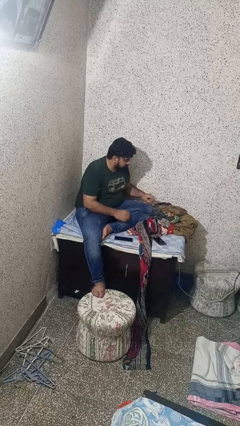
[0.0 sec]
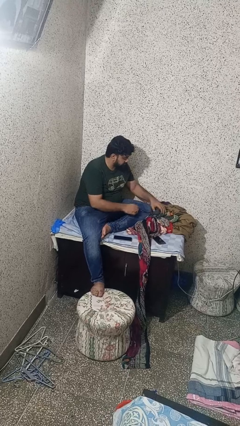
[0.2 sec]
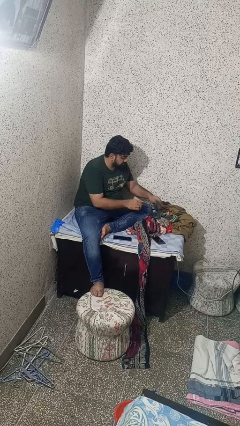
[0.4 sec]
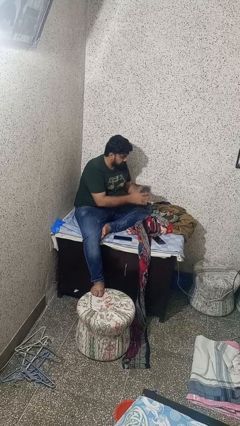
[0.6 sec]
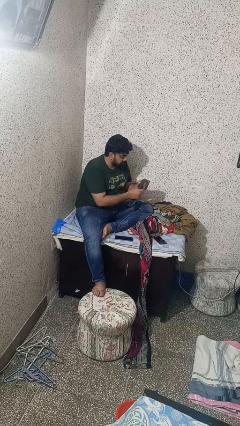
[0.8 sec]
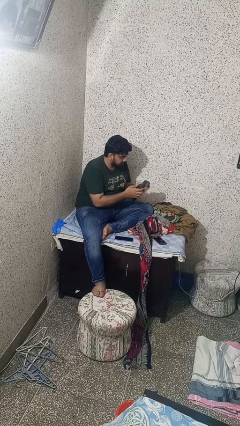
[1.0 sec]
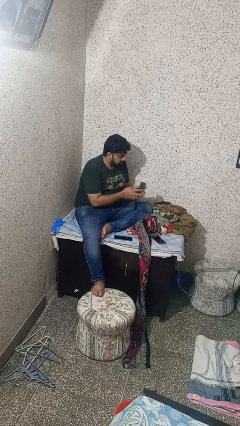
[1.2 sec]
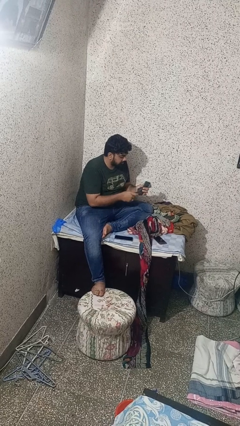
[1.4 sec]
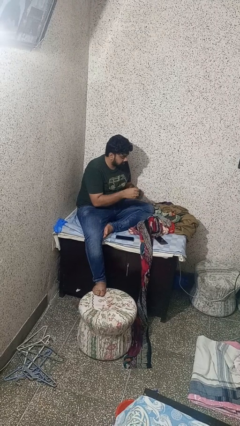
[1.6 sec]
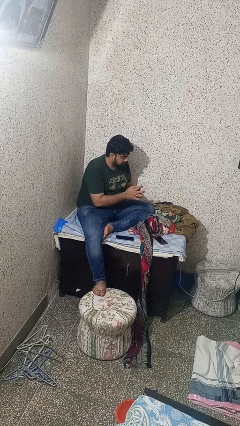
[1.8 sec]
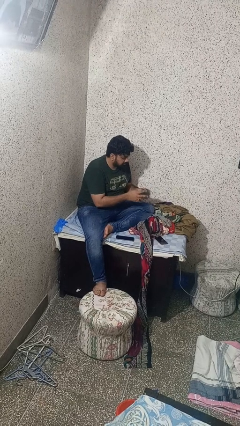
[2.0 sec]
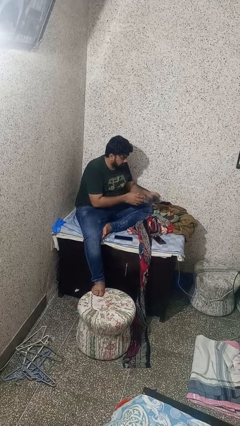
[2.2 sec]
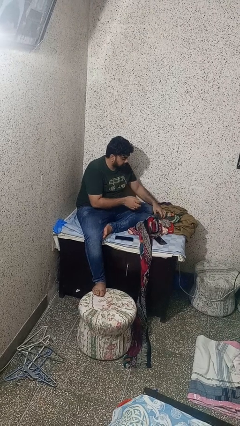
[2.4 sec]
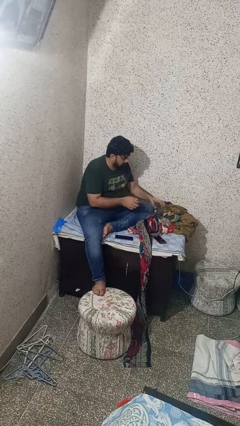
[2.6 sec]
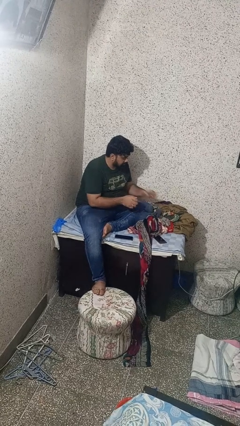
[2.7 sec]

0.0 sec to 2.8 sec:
person folds socks

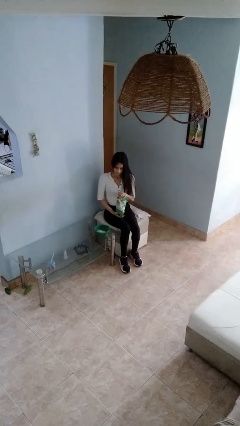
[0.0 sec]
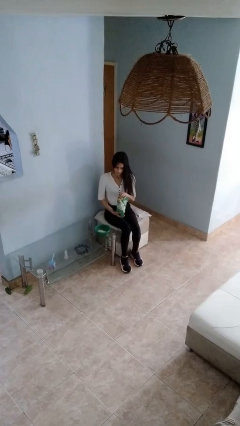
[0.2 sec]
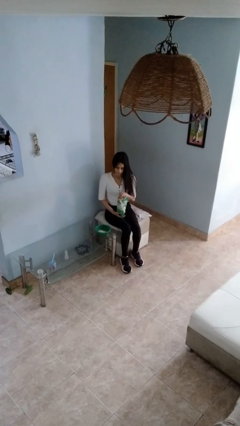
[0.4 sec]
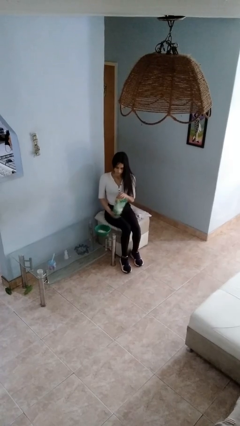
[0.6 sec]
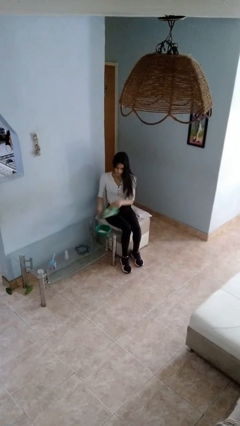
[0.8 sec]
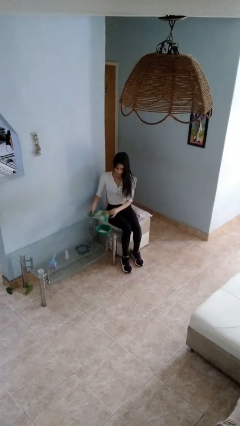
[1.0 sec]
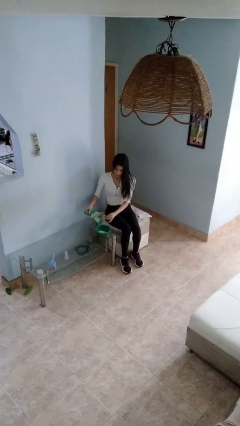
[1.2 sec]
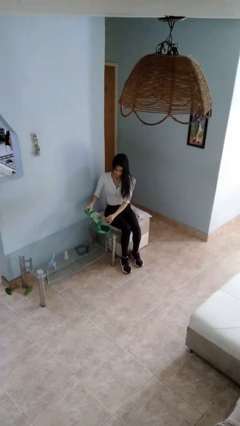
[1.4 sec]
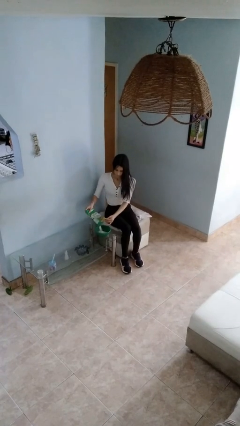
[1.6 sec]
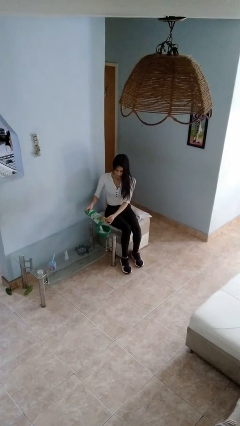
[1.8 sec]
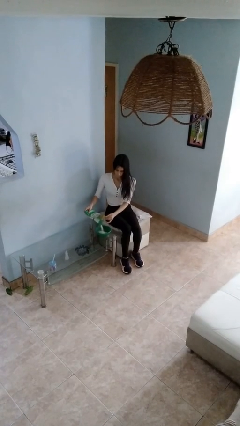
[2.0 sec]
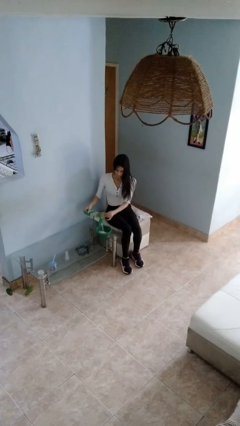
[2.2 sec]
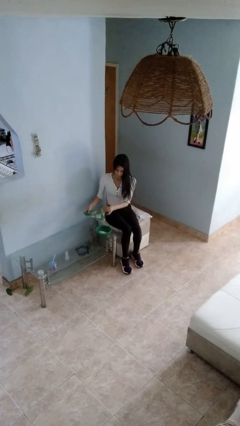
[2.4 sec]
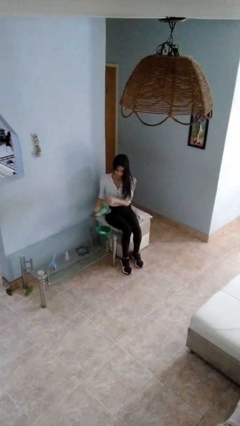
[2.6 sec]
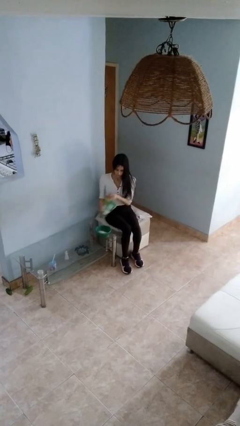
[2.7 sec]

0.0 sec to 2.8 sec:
person pours into bowl

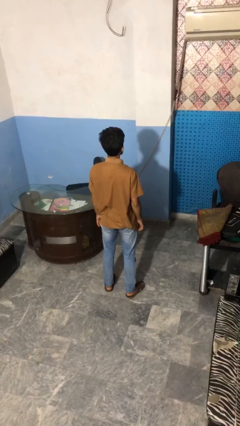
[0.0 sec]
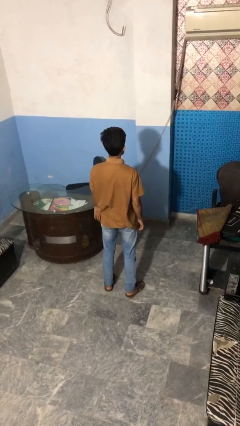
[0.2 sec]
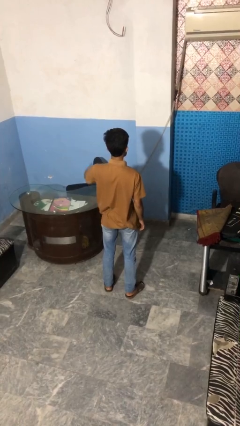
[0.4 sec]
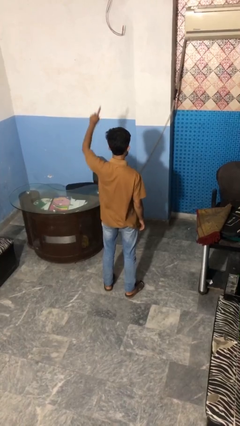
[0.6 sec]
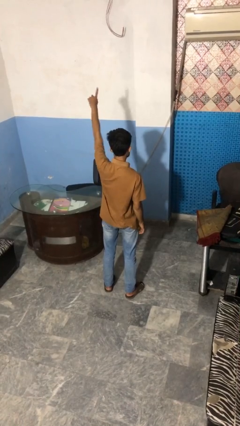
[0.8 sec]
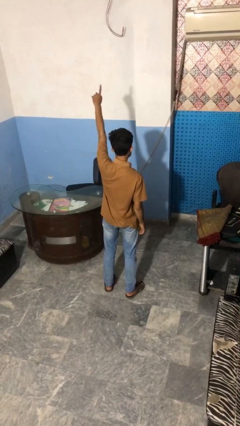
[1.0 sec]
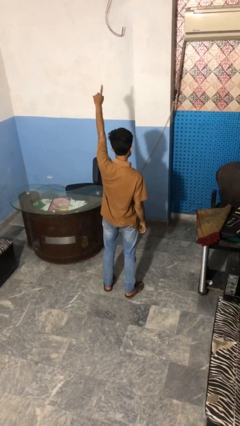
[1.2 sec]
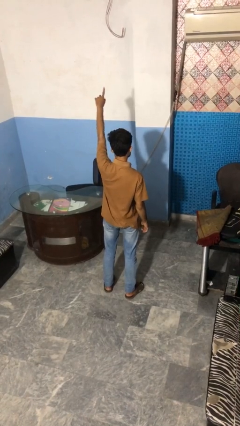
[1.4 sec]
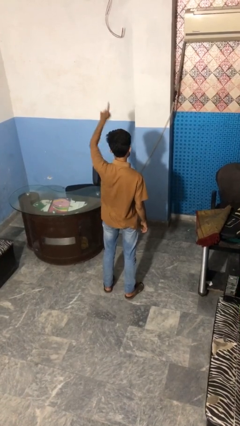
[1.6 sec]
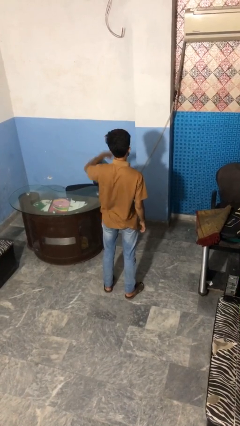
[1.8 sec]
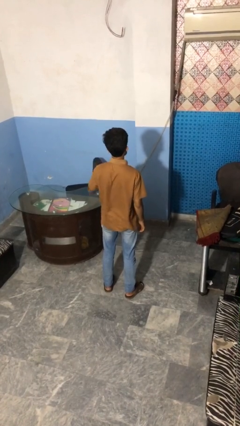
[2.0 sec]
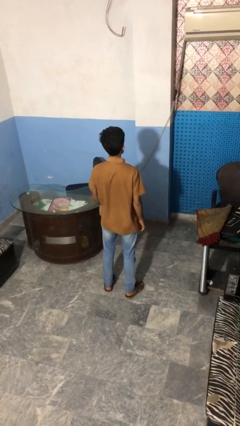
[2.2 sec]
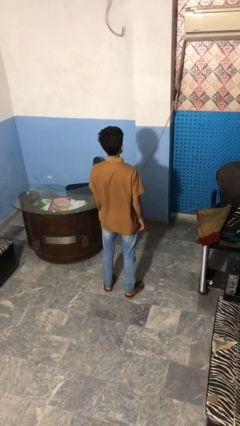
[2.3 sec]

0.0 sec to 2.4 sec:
person gestures number one

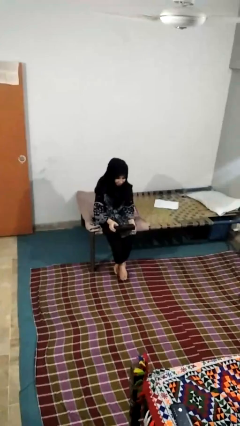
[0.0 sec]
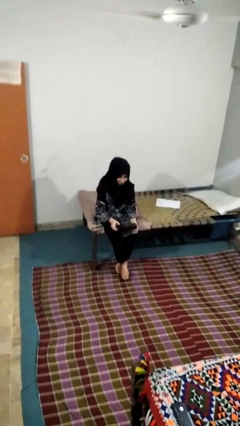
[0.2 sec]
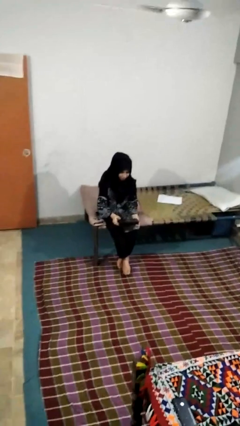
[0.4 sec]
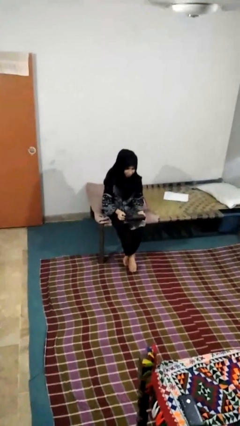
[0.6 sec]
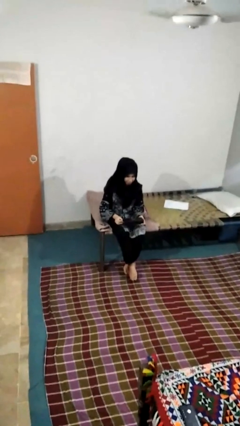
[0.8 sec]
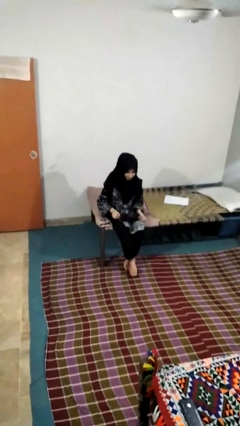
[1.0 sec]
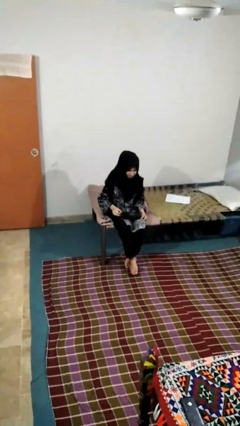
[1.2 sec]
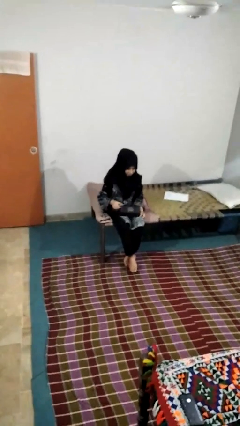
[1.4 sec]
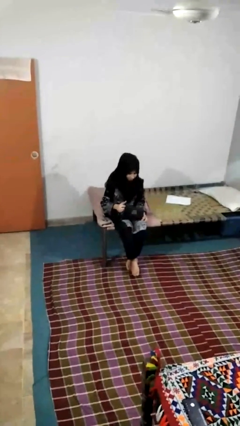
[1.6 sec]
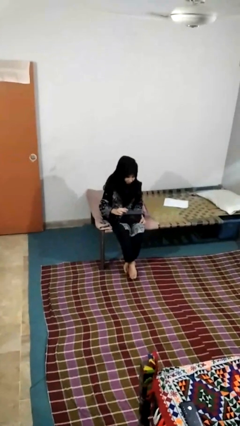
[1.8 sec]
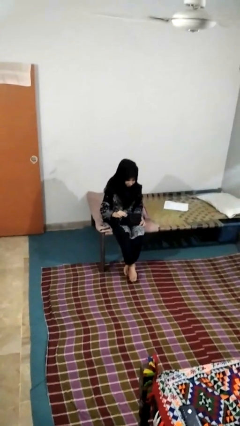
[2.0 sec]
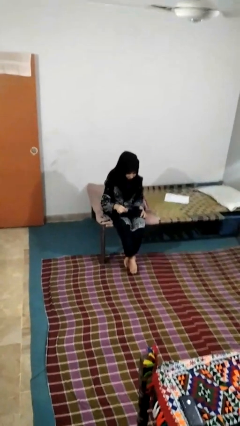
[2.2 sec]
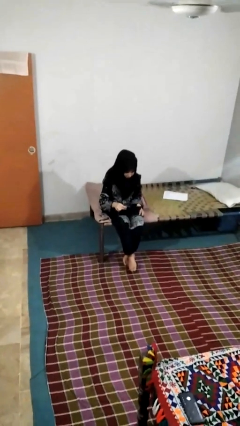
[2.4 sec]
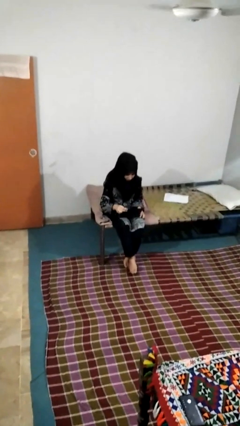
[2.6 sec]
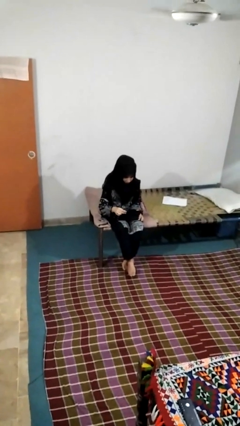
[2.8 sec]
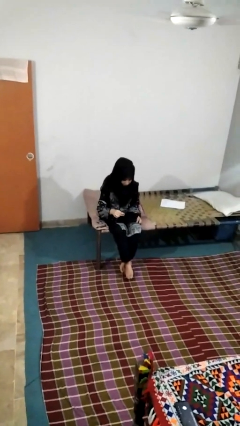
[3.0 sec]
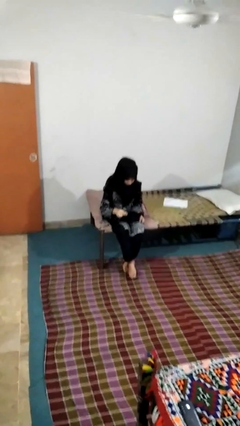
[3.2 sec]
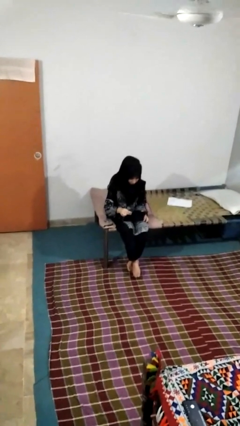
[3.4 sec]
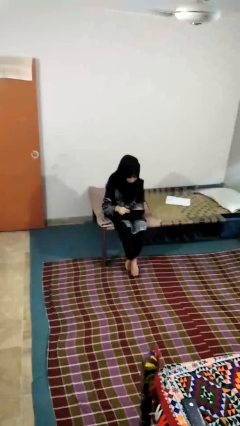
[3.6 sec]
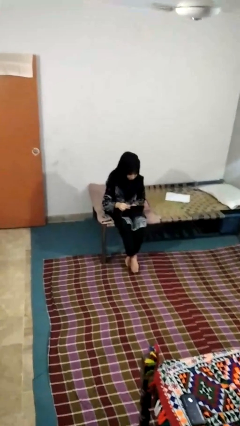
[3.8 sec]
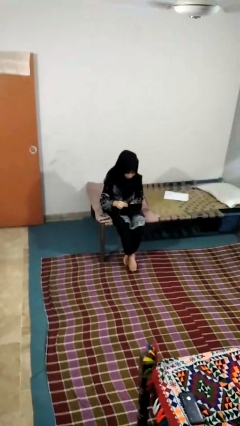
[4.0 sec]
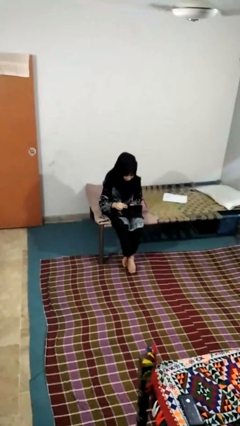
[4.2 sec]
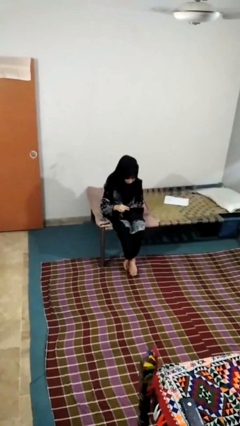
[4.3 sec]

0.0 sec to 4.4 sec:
person opens jewelry box

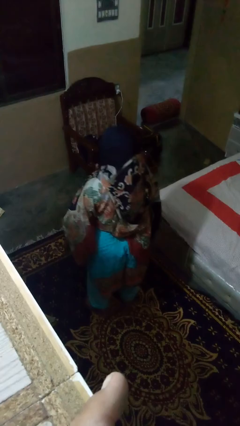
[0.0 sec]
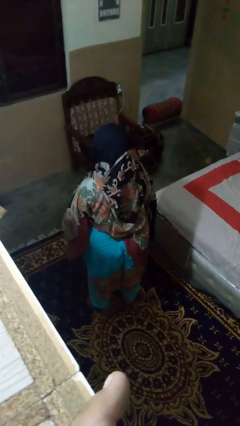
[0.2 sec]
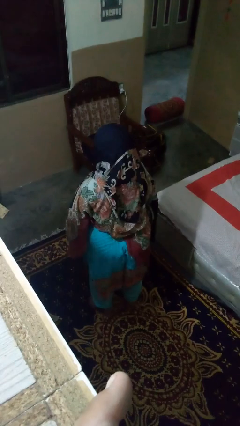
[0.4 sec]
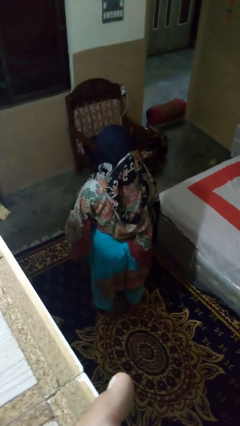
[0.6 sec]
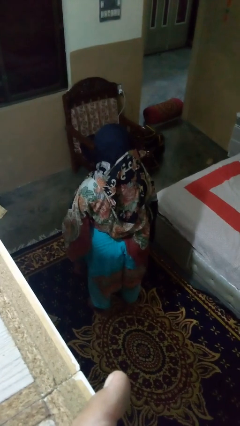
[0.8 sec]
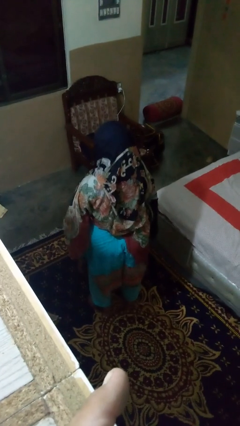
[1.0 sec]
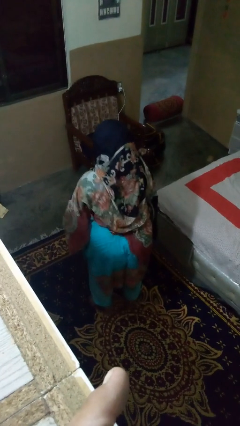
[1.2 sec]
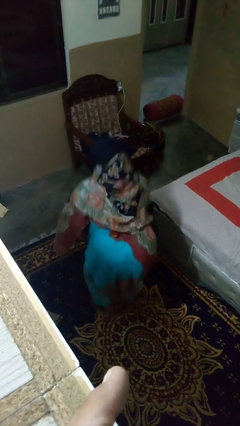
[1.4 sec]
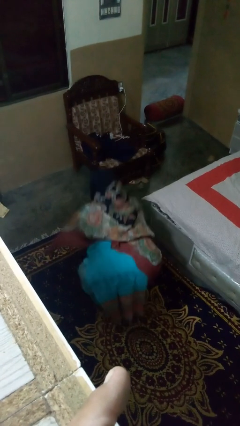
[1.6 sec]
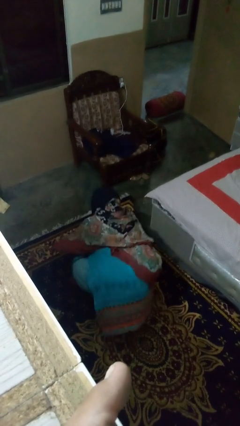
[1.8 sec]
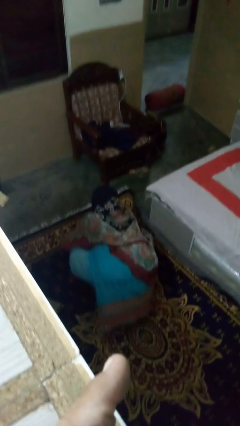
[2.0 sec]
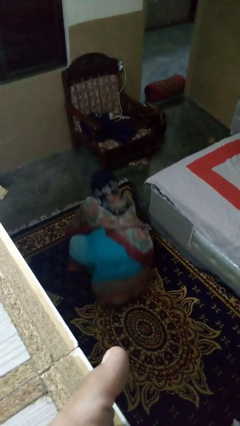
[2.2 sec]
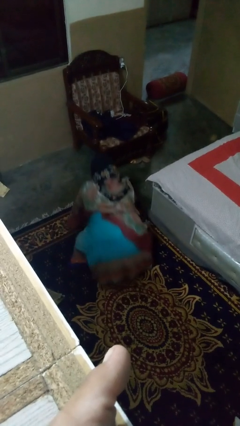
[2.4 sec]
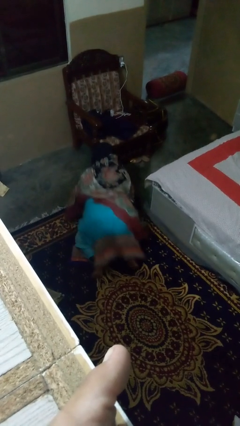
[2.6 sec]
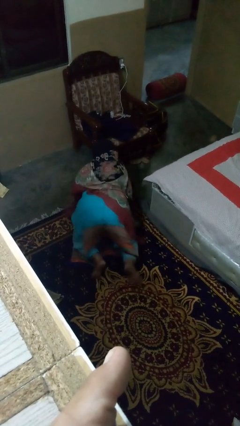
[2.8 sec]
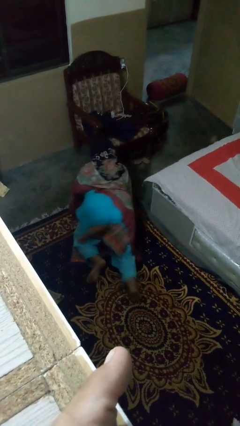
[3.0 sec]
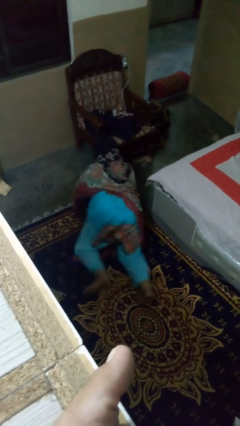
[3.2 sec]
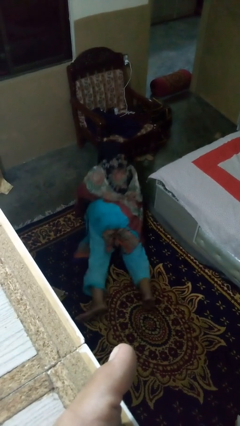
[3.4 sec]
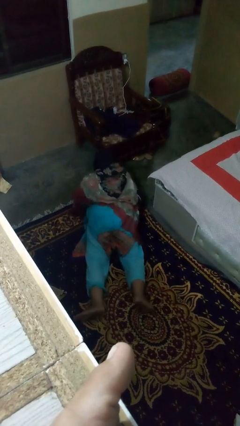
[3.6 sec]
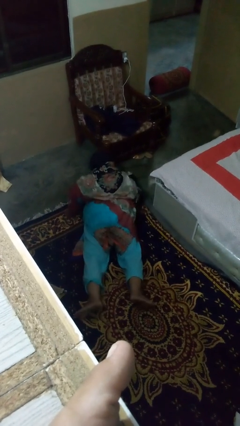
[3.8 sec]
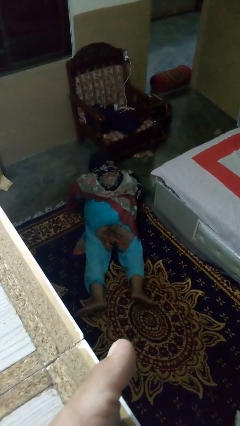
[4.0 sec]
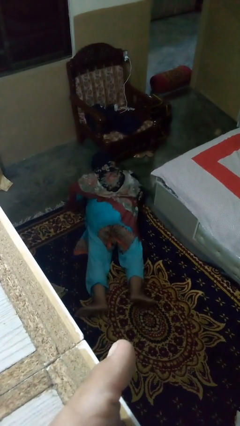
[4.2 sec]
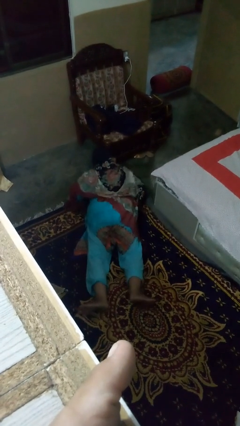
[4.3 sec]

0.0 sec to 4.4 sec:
person exercises with pushup

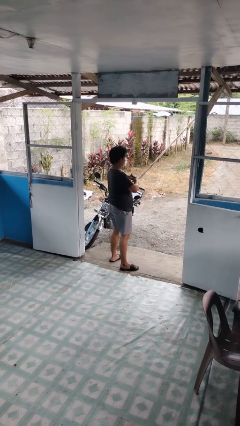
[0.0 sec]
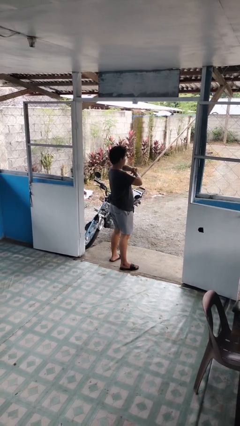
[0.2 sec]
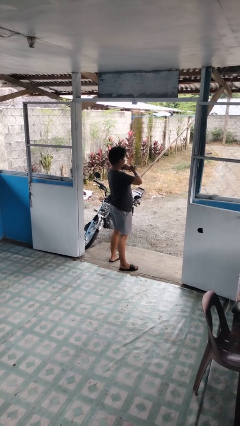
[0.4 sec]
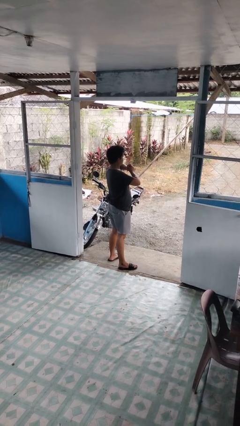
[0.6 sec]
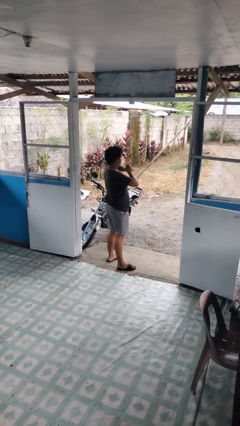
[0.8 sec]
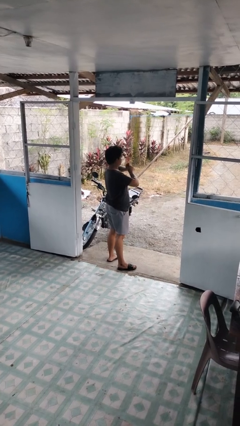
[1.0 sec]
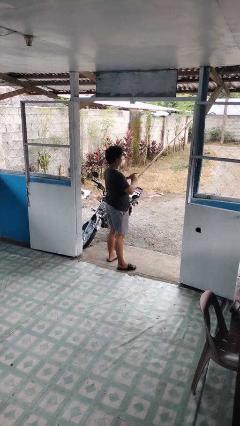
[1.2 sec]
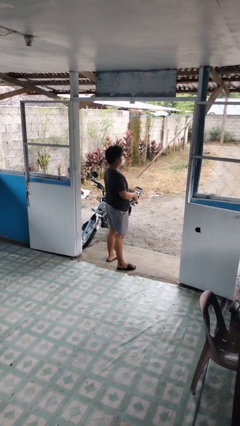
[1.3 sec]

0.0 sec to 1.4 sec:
person cracks knuckles
